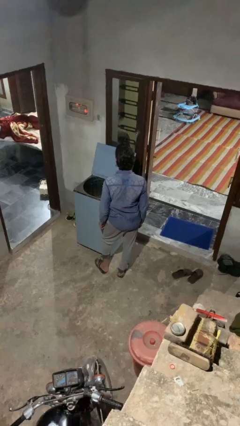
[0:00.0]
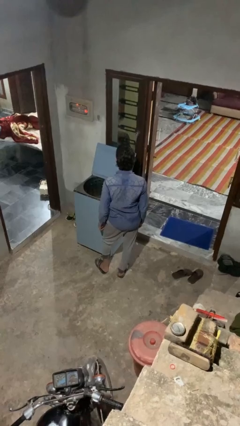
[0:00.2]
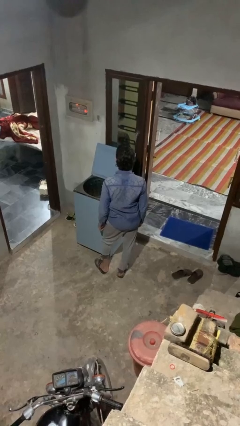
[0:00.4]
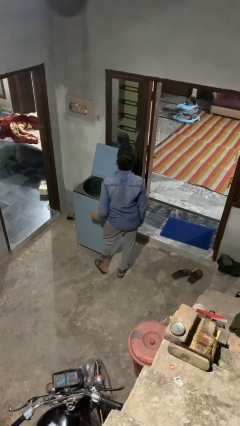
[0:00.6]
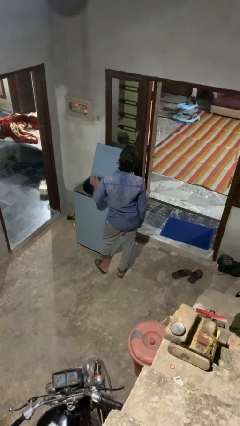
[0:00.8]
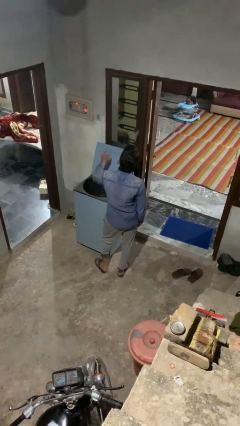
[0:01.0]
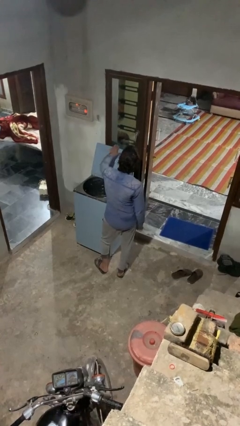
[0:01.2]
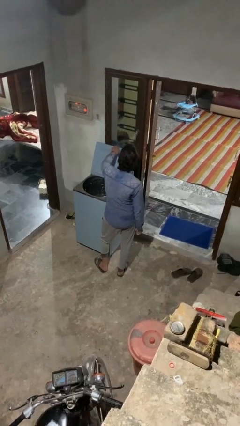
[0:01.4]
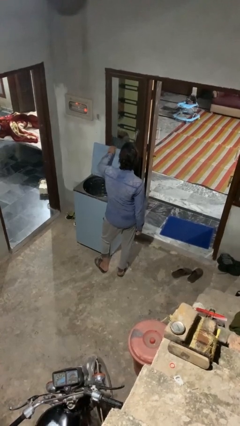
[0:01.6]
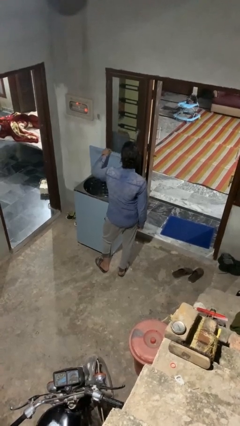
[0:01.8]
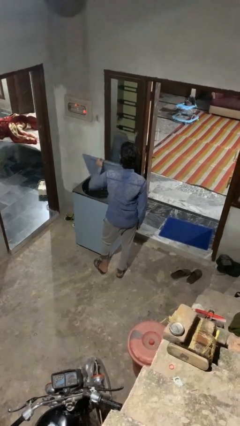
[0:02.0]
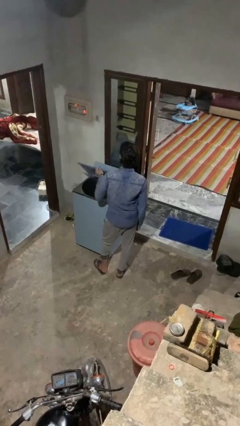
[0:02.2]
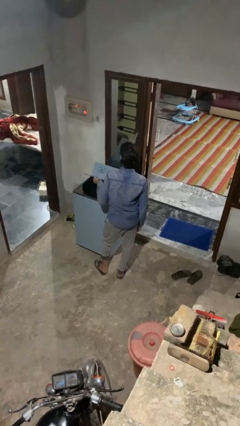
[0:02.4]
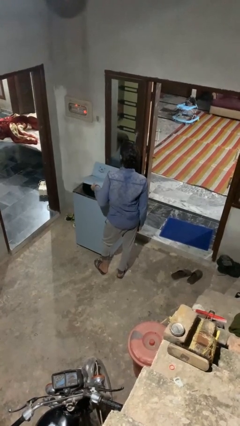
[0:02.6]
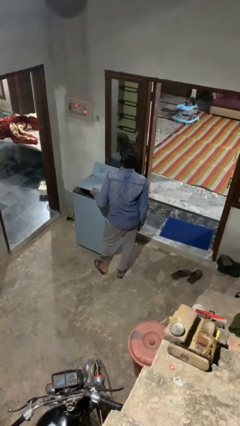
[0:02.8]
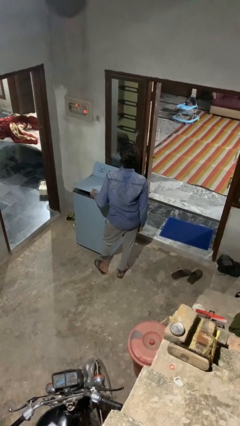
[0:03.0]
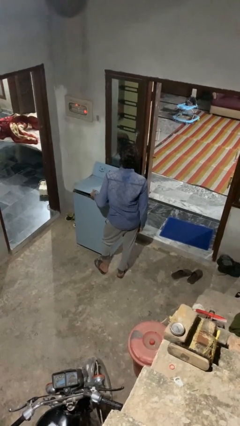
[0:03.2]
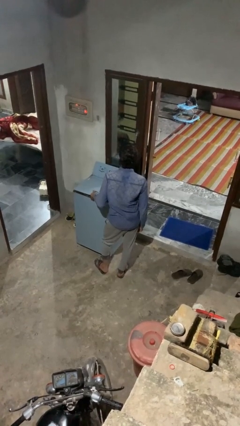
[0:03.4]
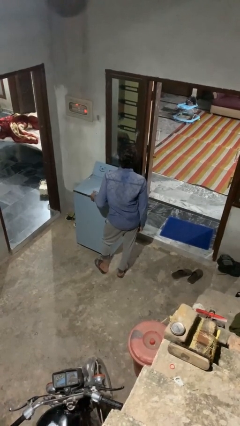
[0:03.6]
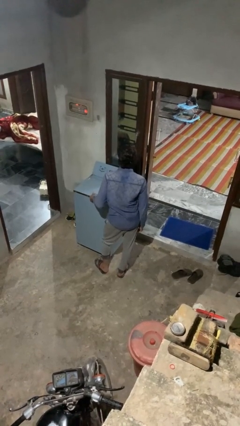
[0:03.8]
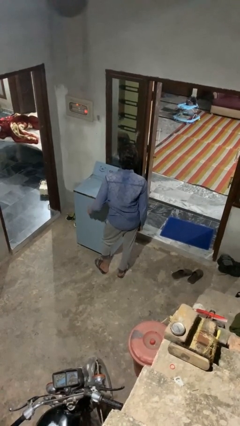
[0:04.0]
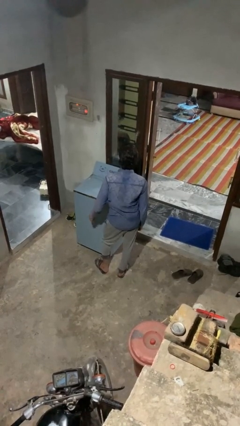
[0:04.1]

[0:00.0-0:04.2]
person closes clothes washer

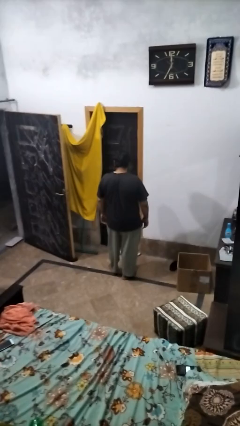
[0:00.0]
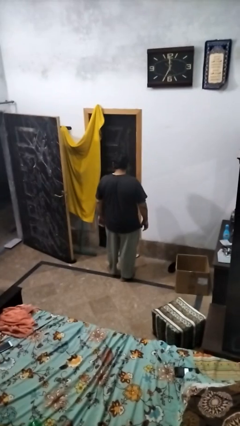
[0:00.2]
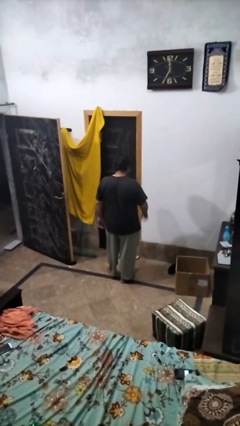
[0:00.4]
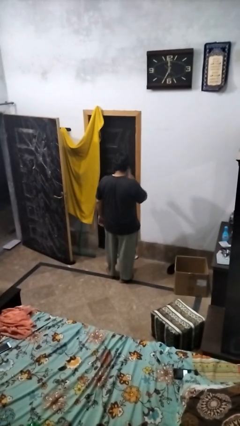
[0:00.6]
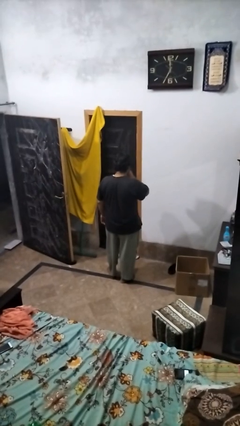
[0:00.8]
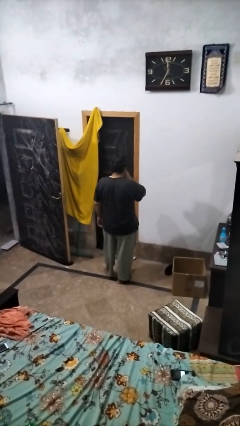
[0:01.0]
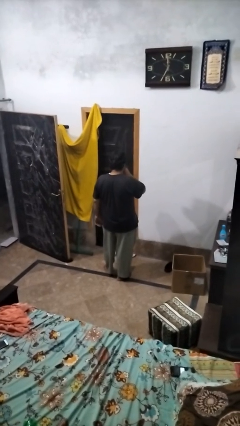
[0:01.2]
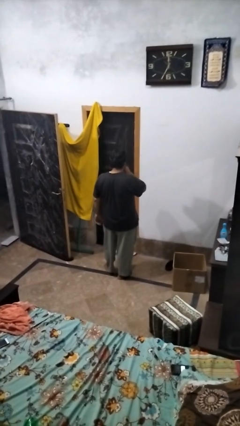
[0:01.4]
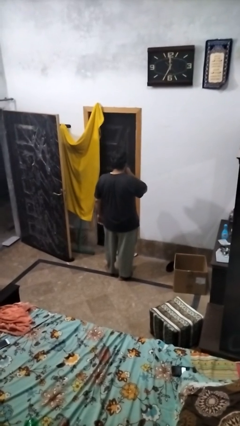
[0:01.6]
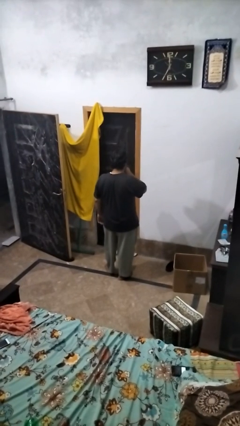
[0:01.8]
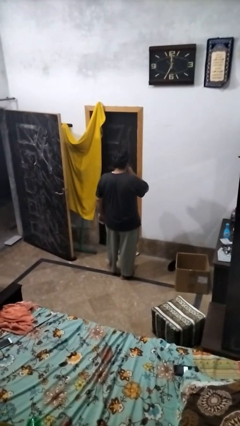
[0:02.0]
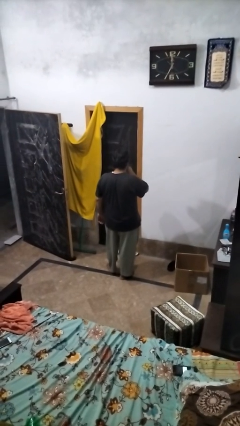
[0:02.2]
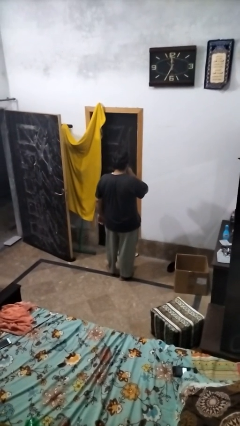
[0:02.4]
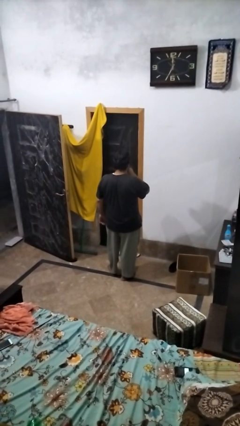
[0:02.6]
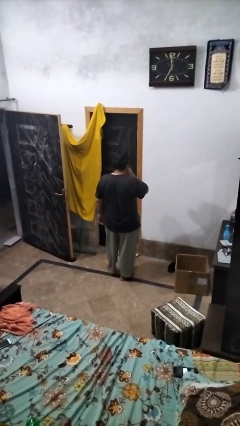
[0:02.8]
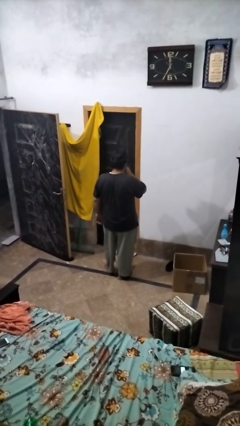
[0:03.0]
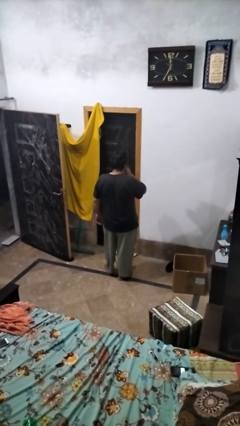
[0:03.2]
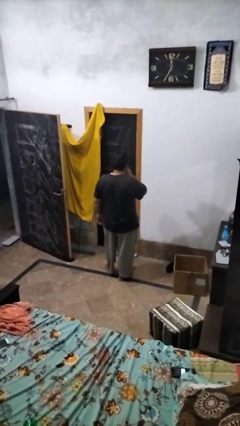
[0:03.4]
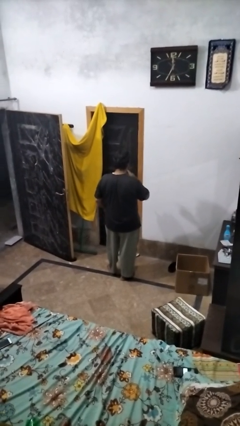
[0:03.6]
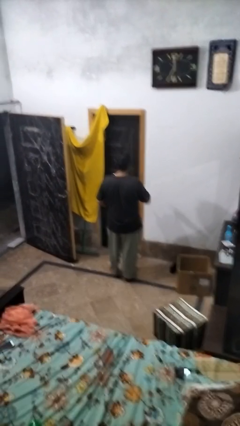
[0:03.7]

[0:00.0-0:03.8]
person gestures be quiet

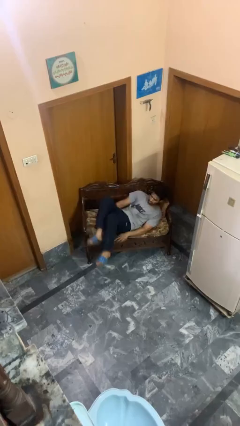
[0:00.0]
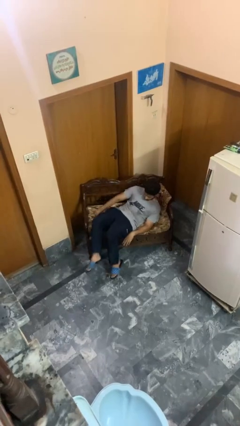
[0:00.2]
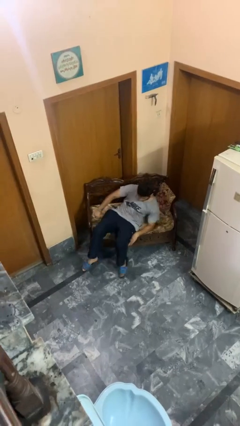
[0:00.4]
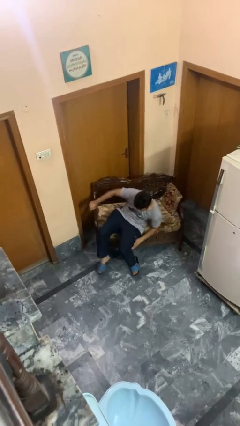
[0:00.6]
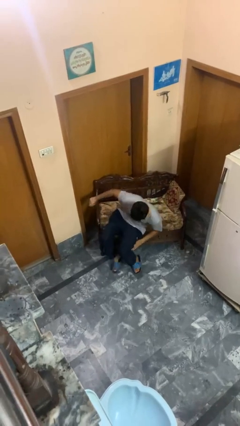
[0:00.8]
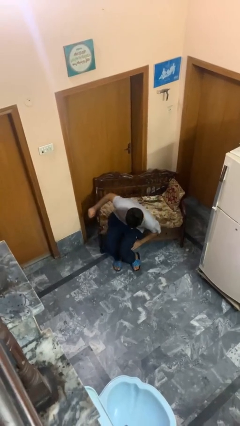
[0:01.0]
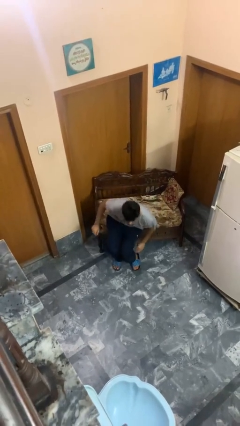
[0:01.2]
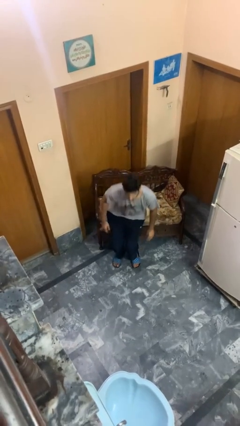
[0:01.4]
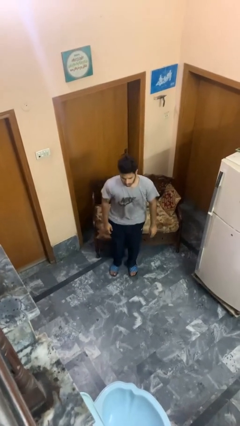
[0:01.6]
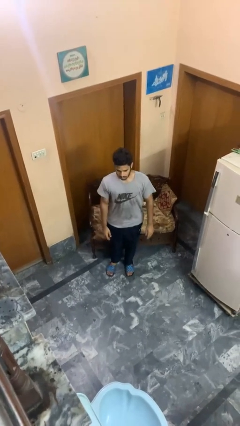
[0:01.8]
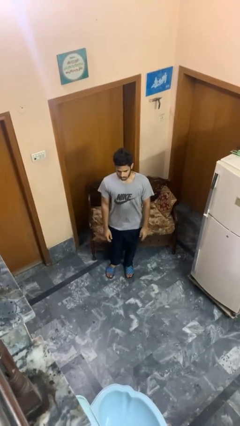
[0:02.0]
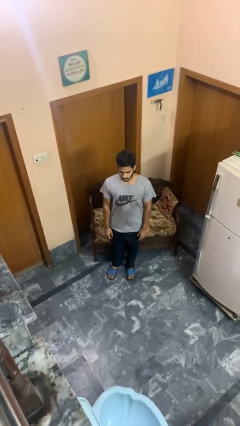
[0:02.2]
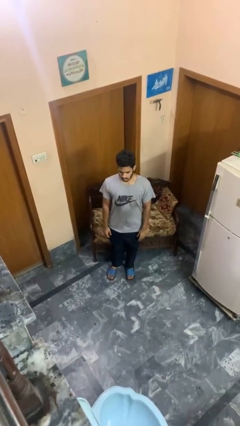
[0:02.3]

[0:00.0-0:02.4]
person stands up

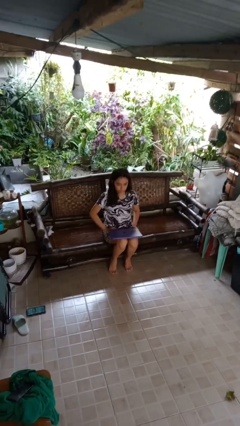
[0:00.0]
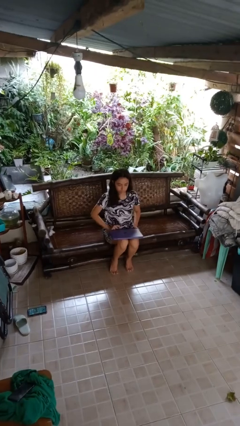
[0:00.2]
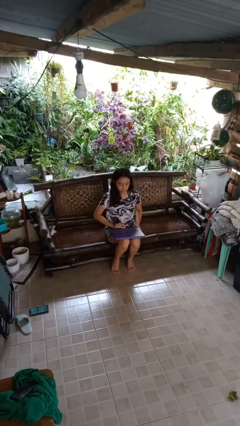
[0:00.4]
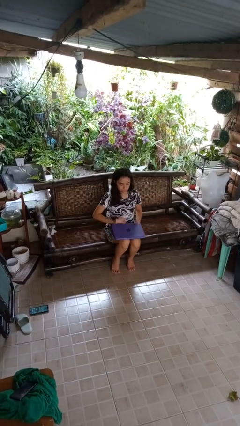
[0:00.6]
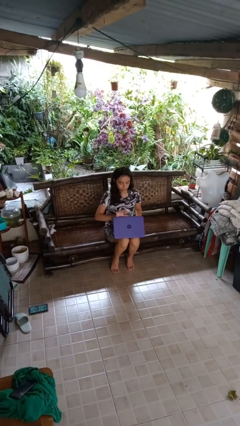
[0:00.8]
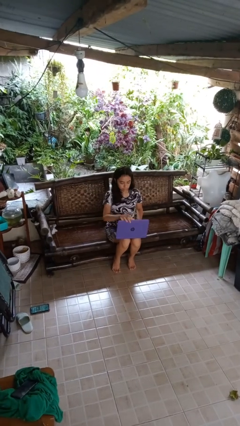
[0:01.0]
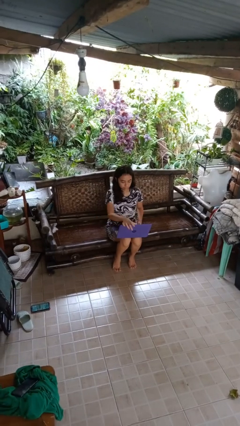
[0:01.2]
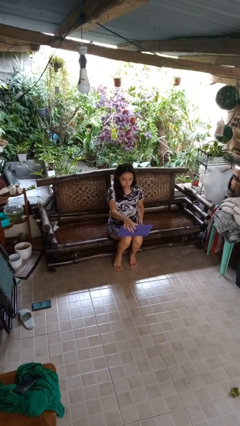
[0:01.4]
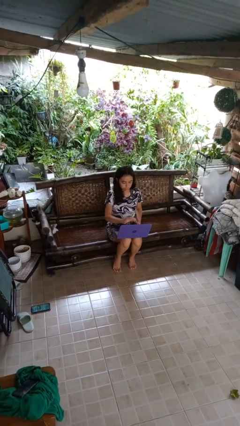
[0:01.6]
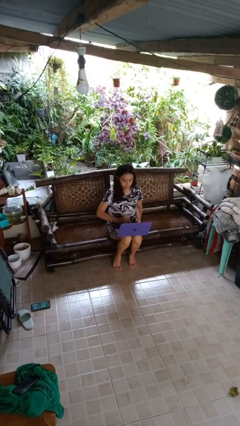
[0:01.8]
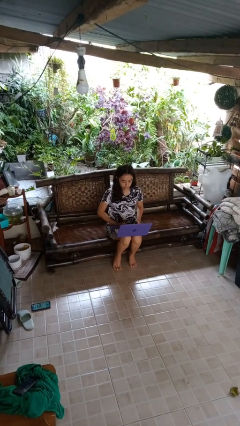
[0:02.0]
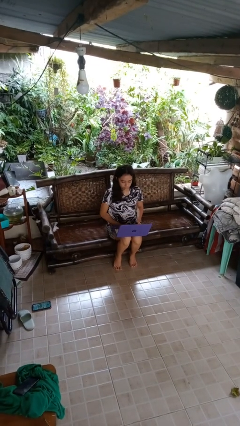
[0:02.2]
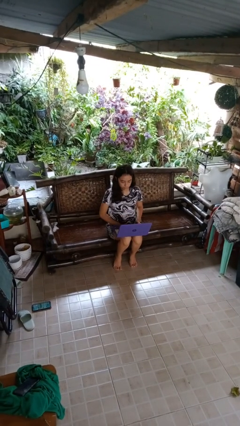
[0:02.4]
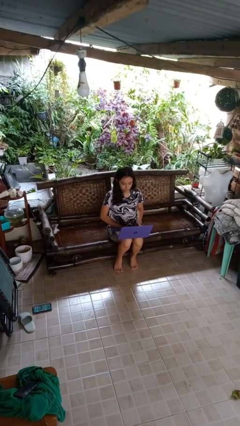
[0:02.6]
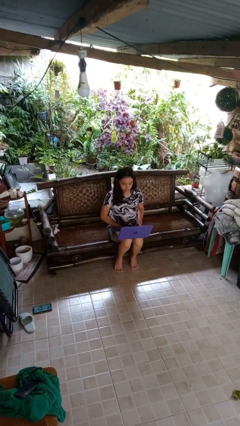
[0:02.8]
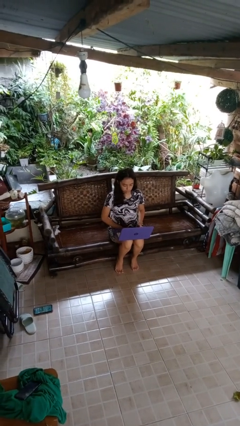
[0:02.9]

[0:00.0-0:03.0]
person opens laptop

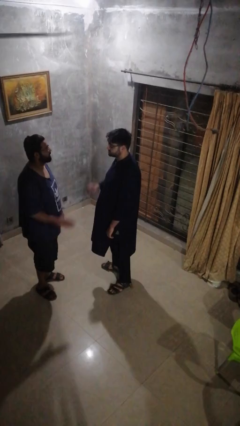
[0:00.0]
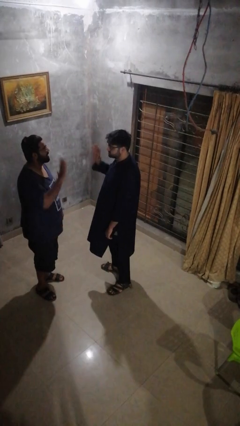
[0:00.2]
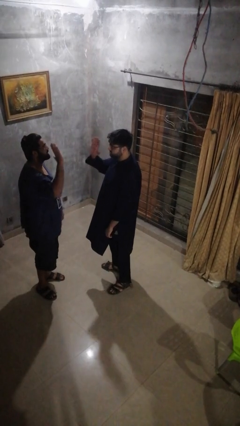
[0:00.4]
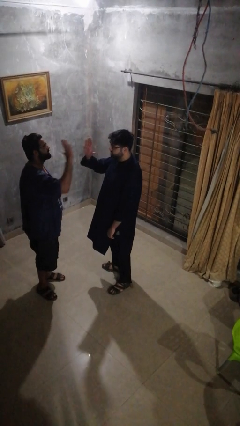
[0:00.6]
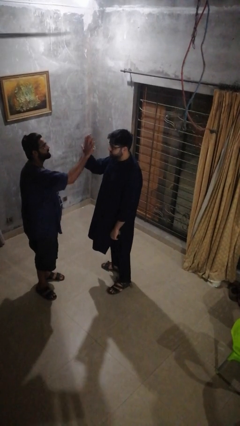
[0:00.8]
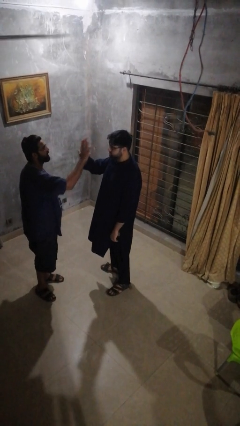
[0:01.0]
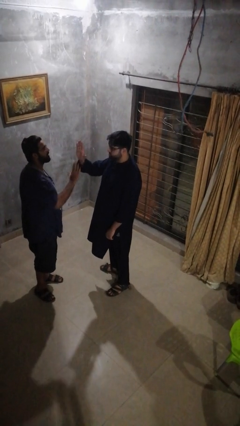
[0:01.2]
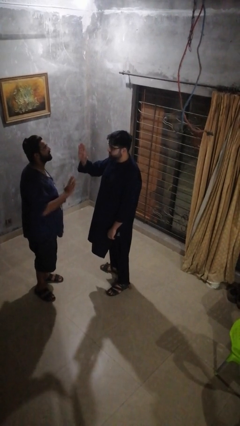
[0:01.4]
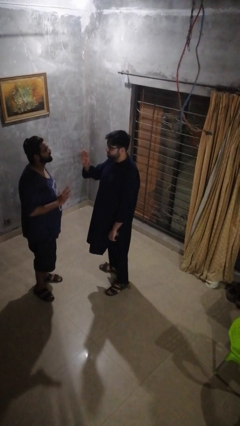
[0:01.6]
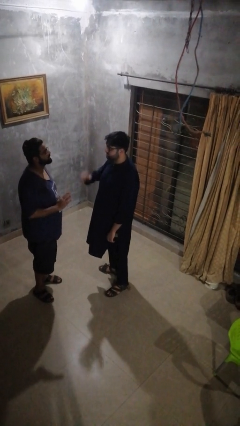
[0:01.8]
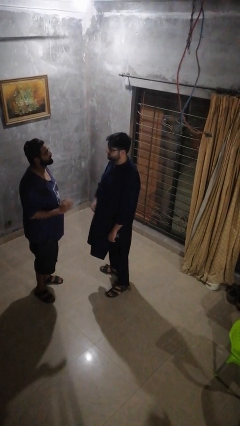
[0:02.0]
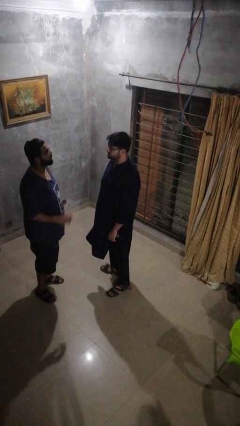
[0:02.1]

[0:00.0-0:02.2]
person highfives hand

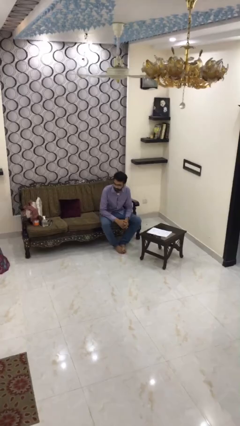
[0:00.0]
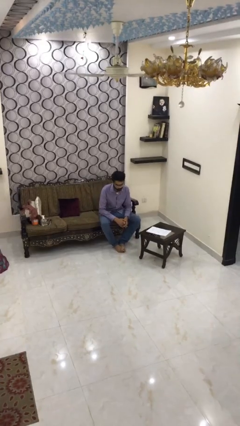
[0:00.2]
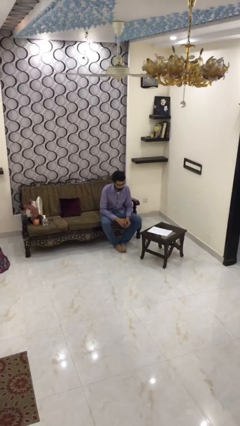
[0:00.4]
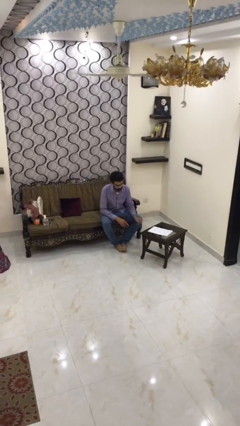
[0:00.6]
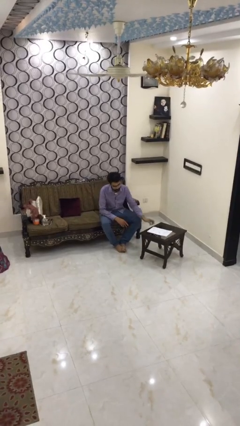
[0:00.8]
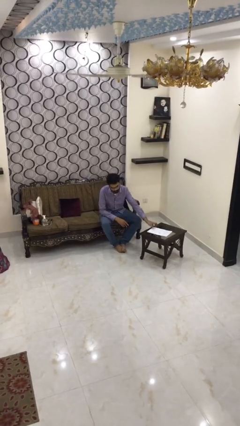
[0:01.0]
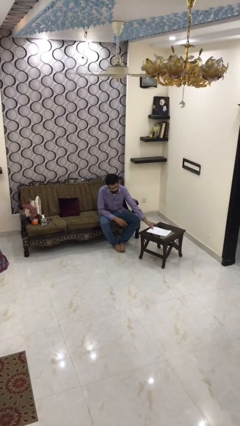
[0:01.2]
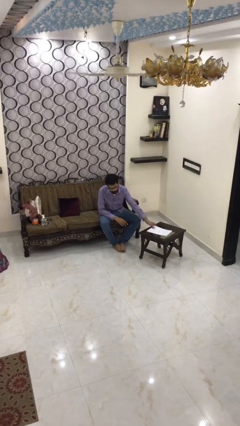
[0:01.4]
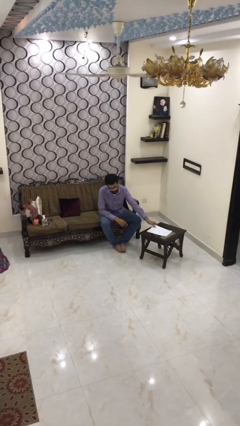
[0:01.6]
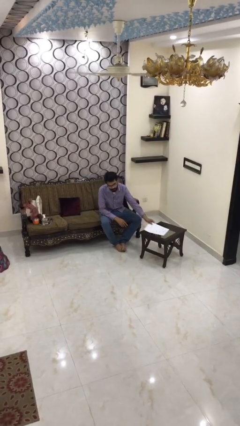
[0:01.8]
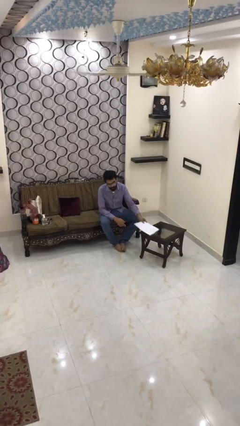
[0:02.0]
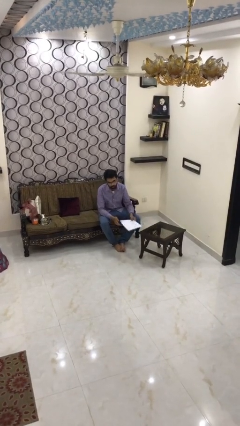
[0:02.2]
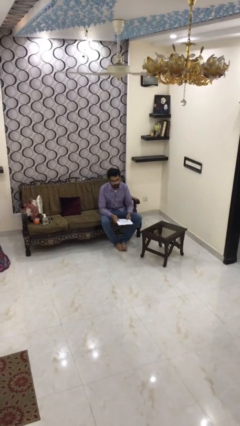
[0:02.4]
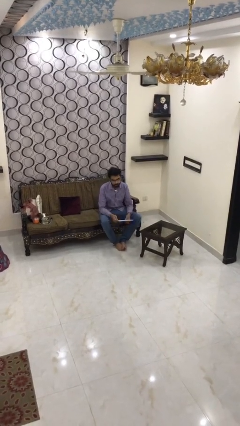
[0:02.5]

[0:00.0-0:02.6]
person picks up object from table
